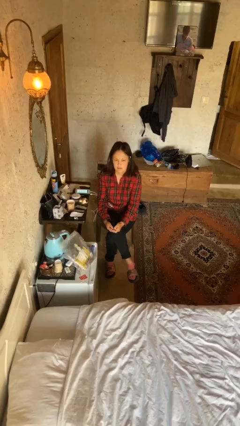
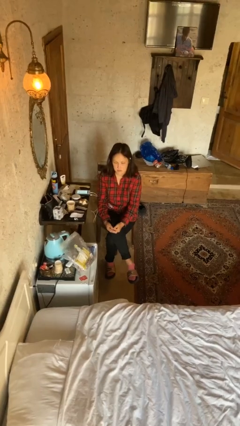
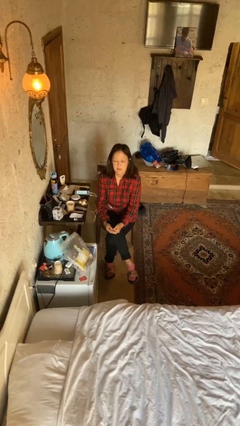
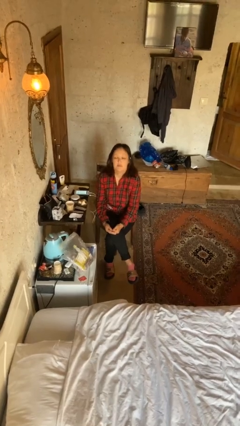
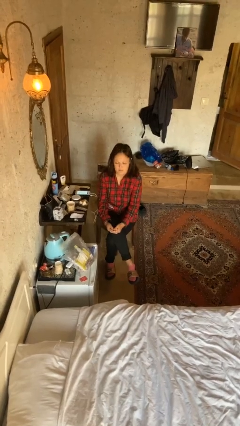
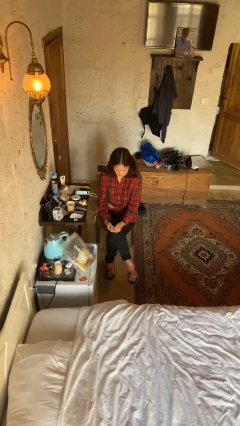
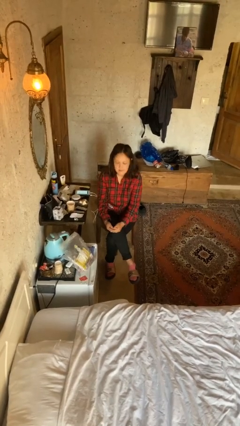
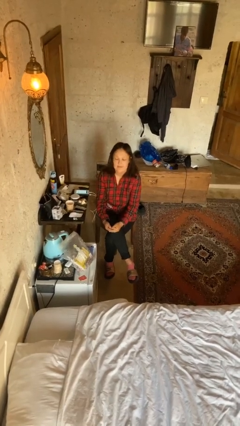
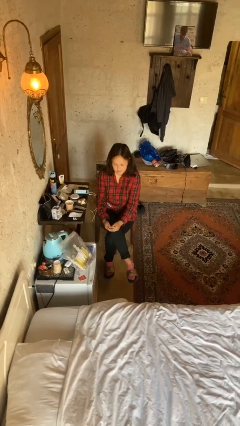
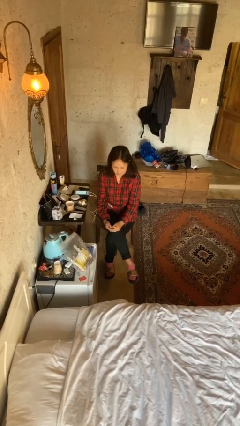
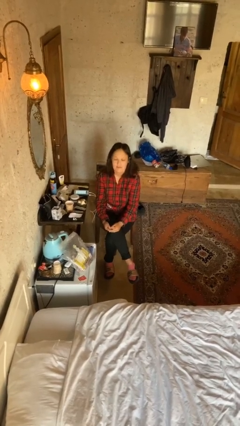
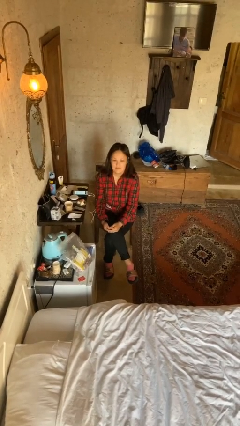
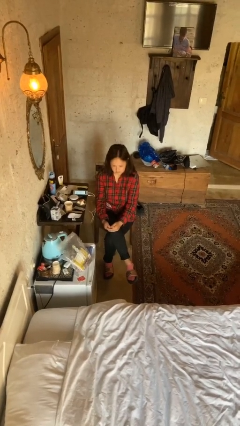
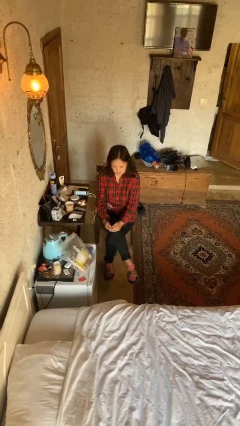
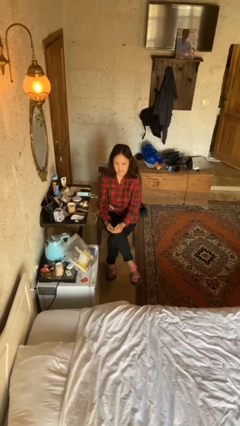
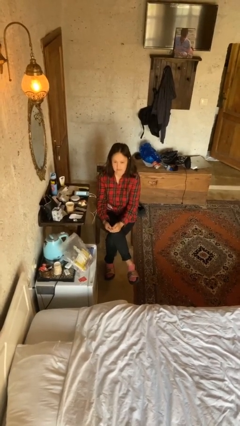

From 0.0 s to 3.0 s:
person nods head

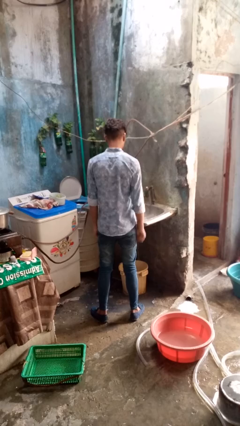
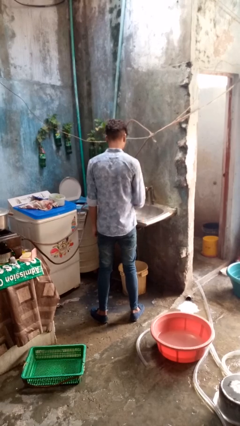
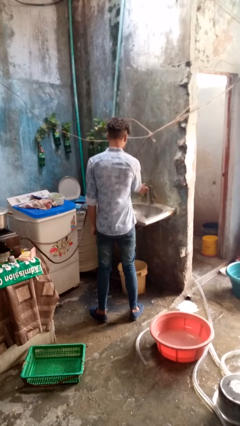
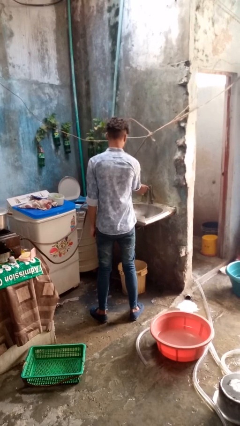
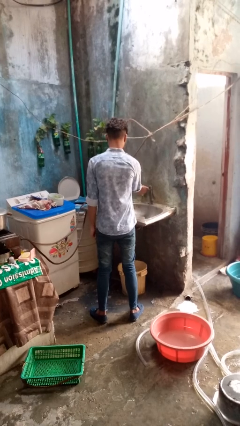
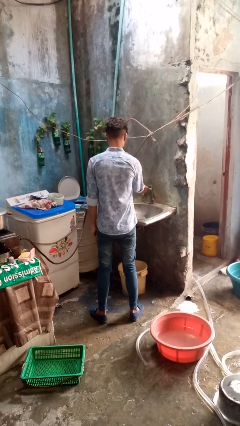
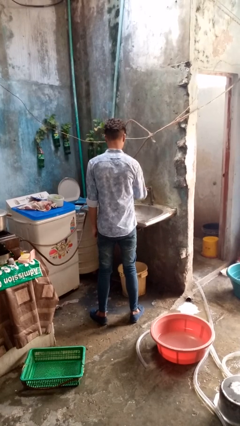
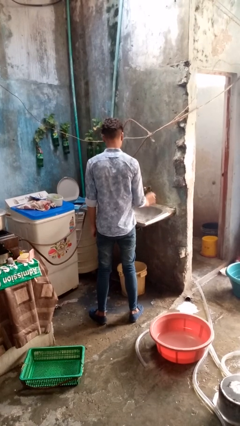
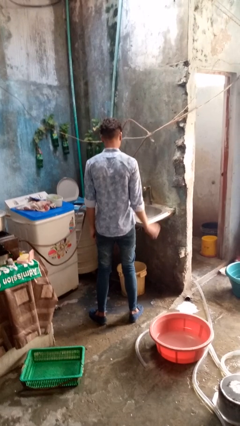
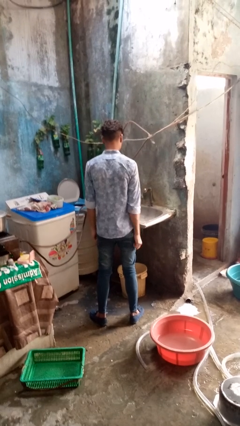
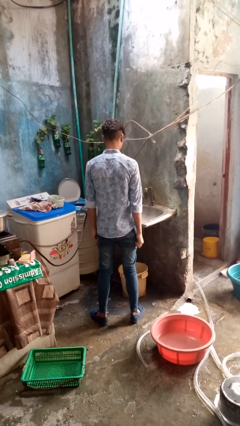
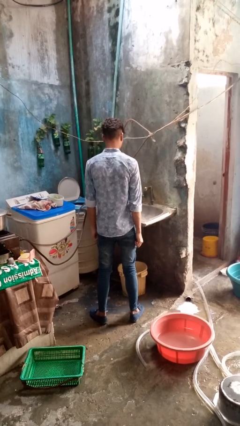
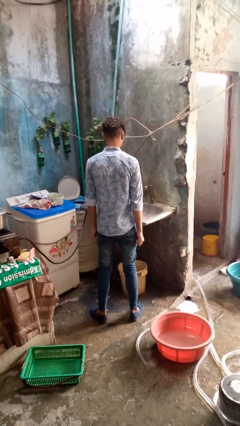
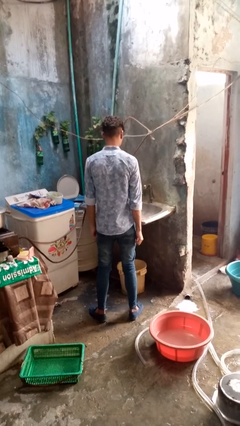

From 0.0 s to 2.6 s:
person turns off faucet

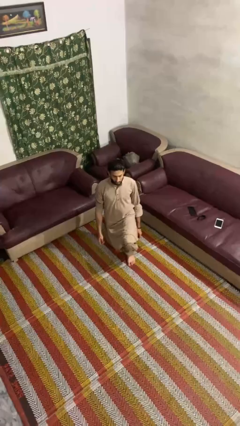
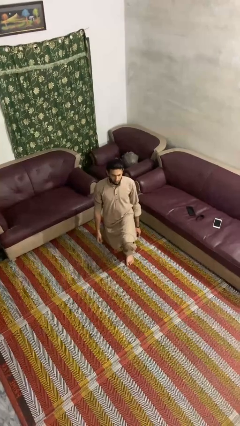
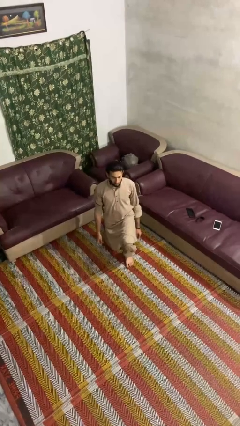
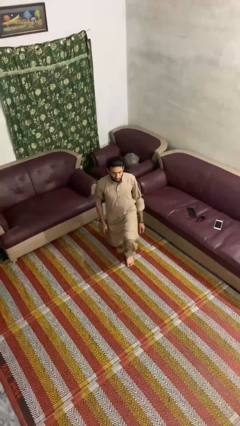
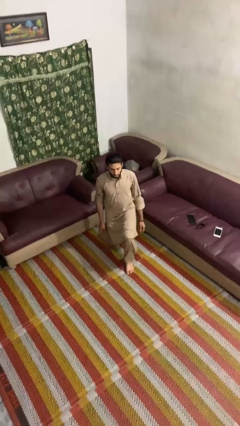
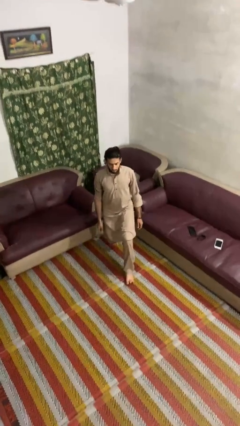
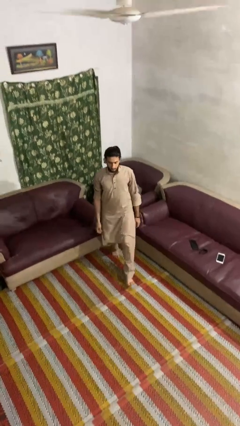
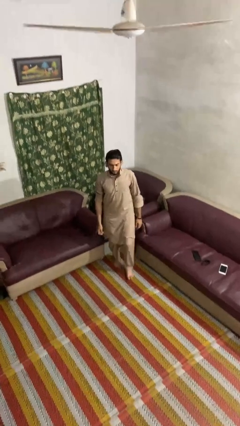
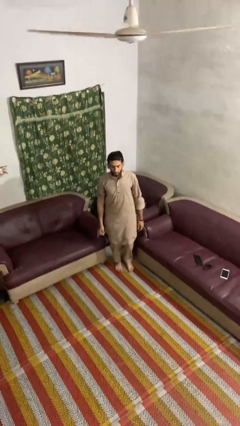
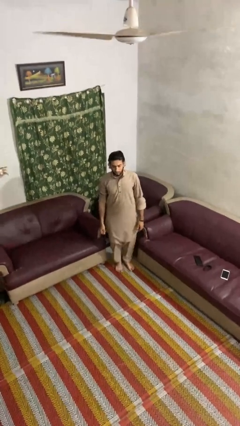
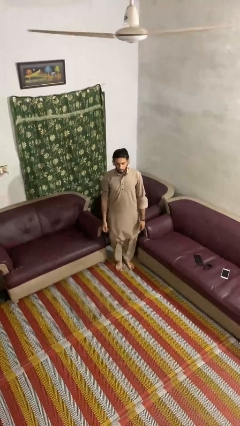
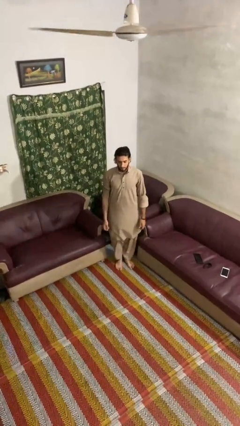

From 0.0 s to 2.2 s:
person stands up from floor

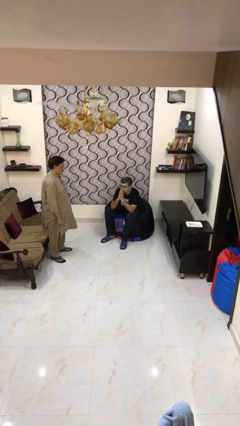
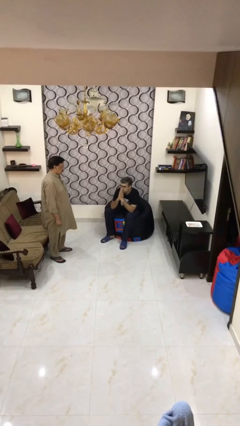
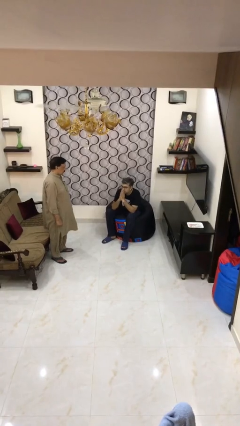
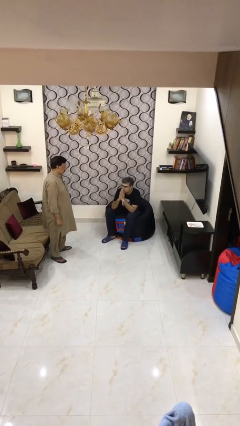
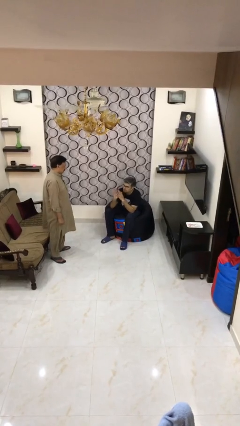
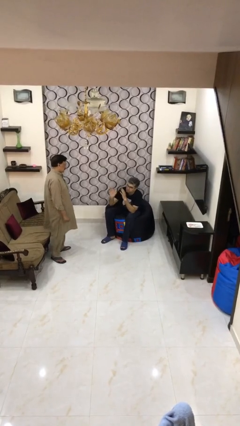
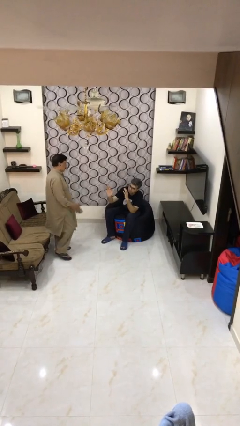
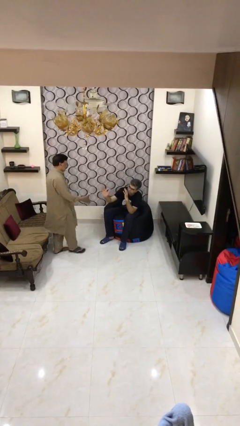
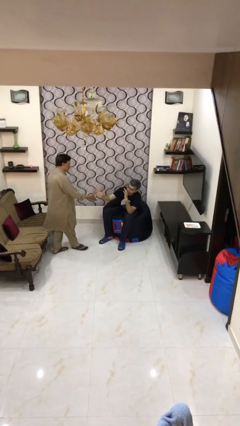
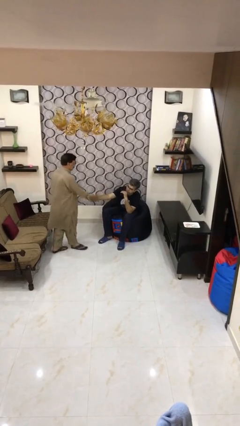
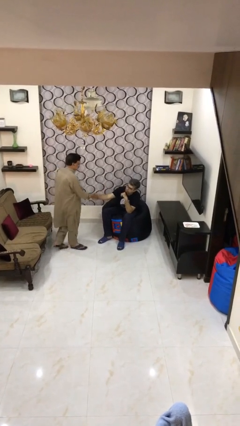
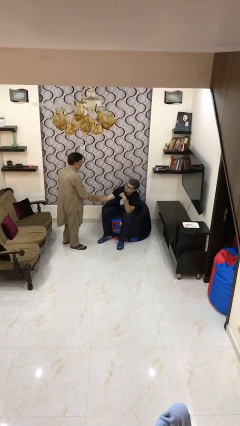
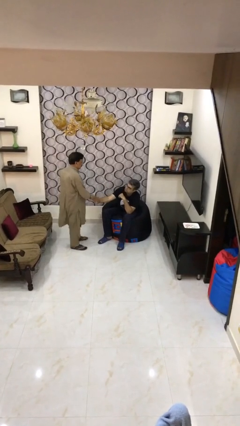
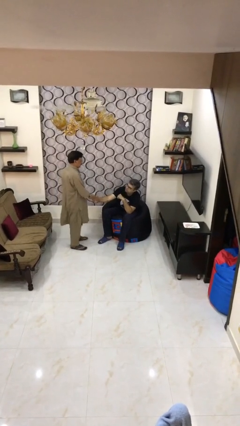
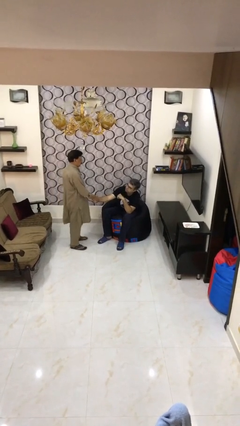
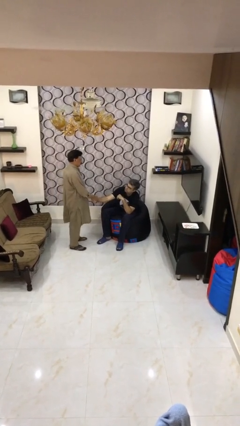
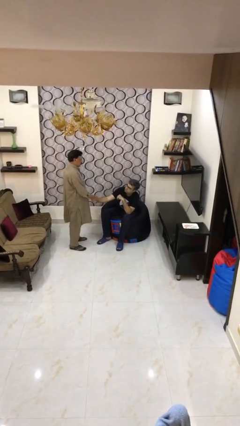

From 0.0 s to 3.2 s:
person shakes hand

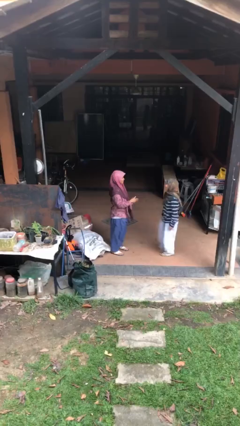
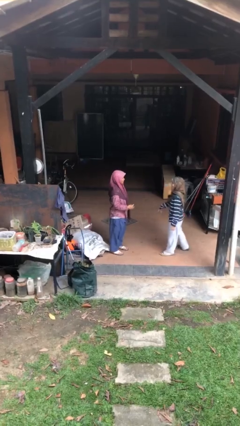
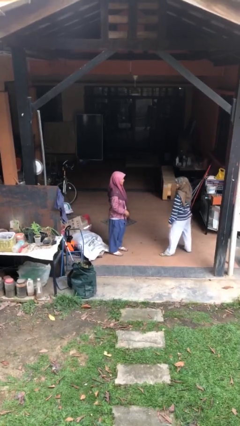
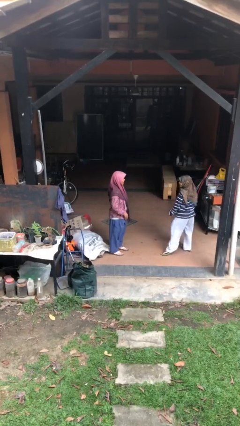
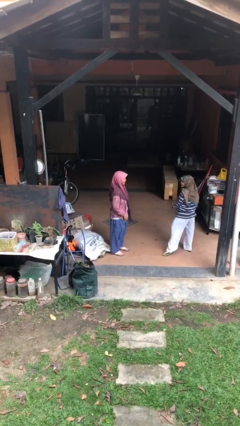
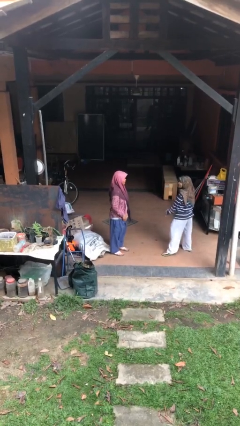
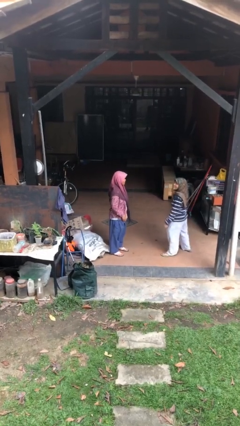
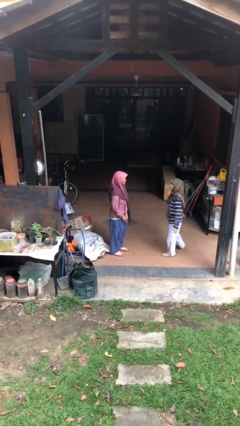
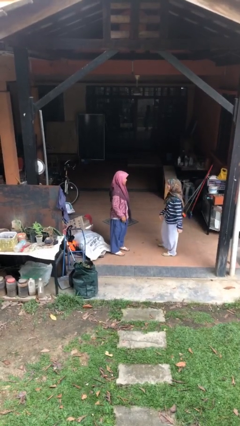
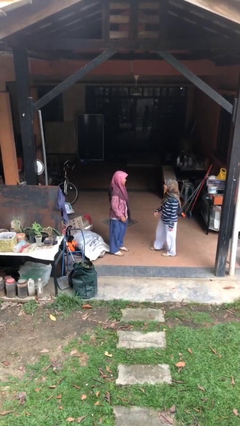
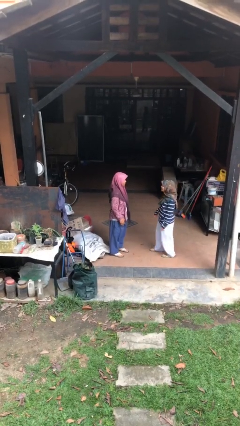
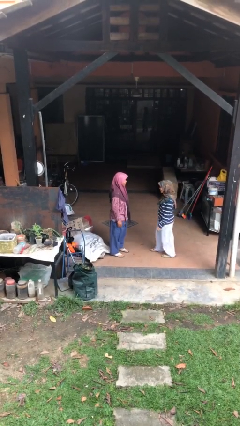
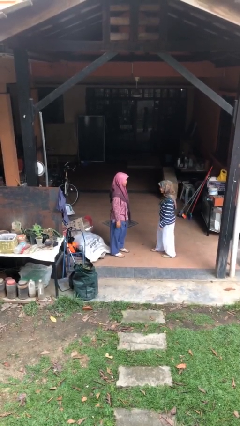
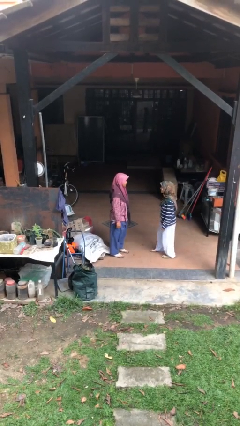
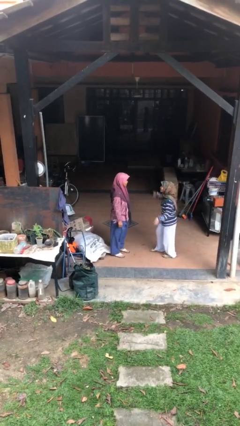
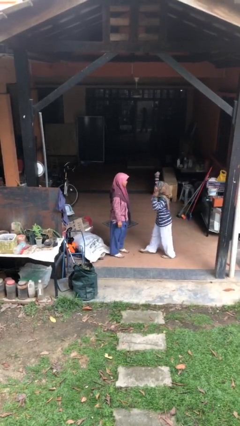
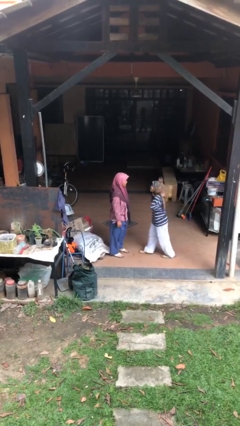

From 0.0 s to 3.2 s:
person talks to person

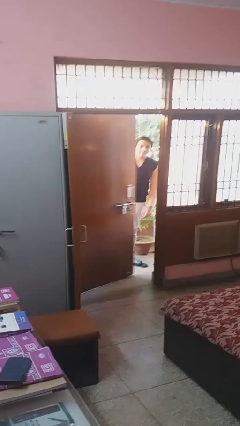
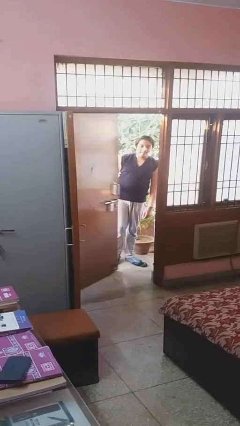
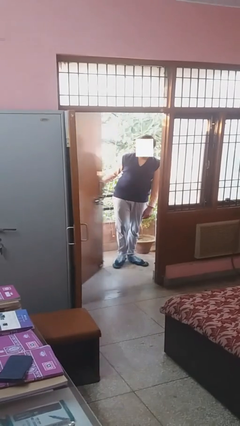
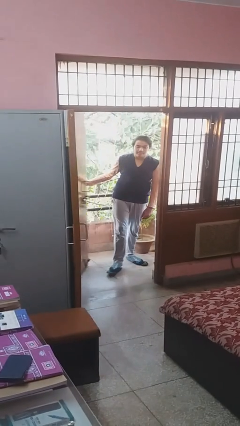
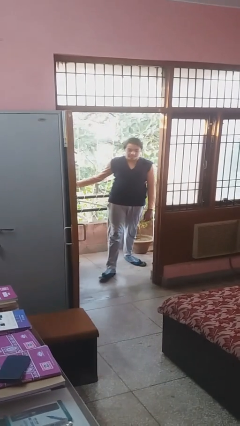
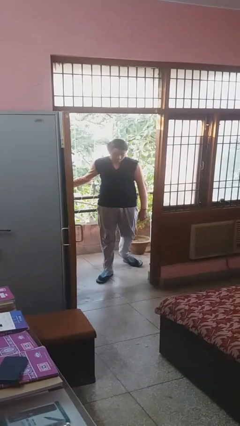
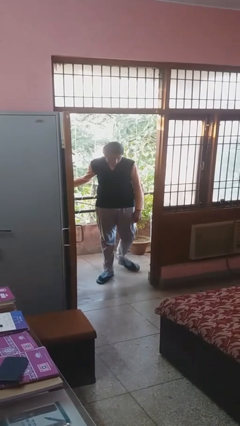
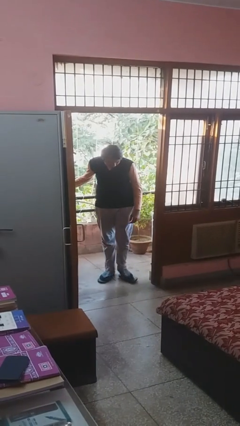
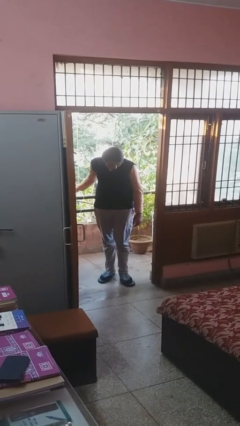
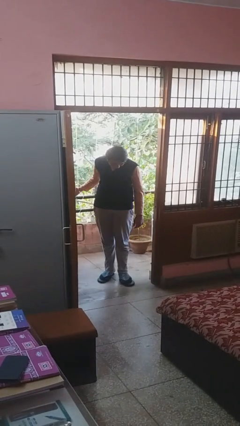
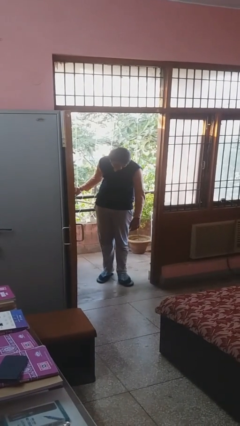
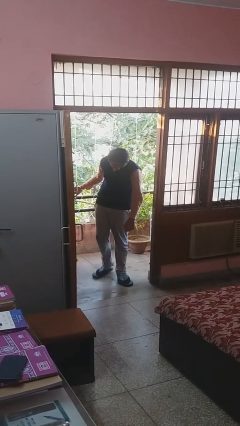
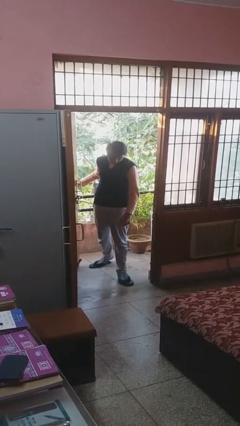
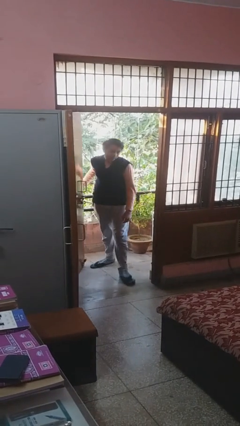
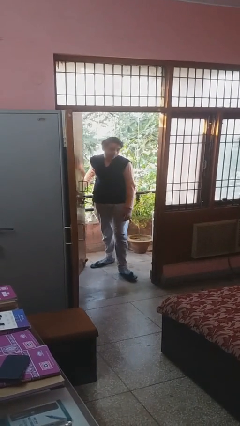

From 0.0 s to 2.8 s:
person opens facility door

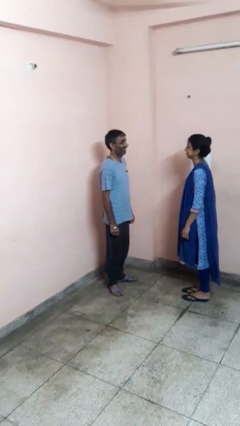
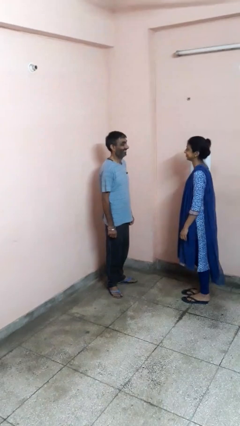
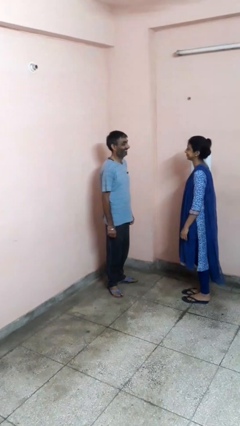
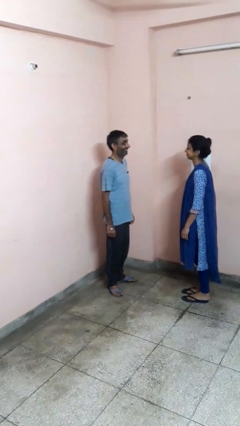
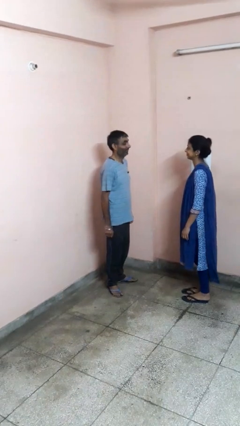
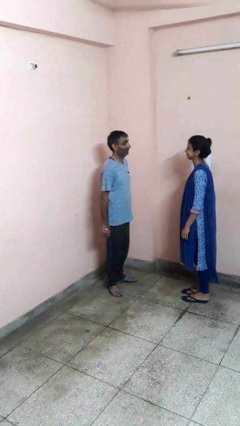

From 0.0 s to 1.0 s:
person laughs with person
